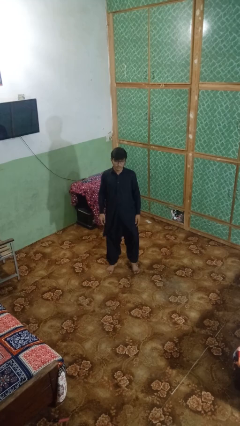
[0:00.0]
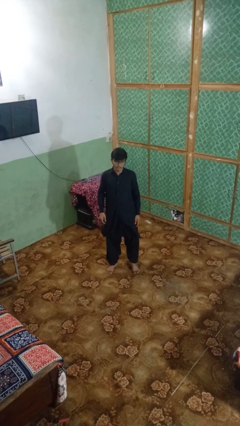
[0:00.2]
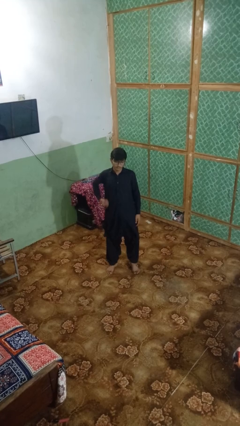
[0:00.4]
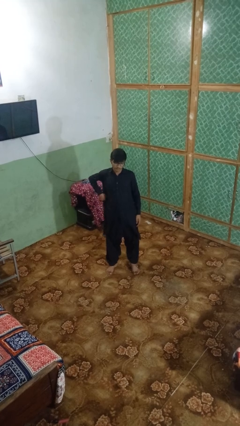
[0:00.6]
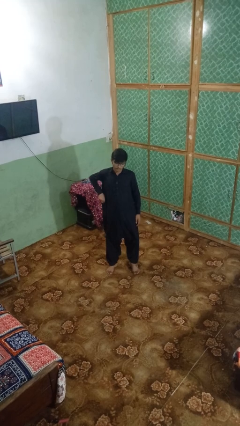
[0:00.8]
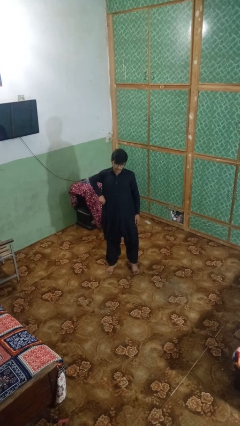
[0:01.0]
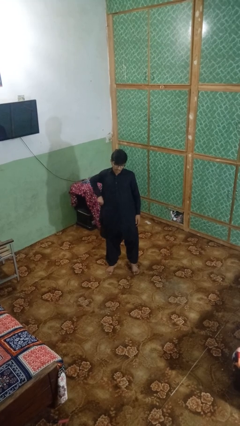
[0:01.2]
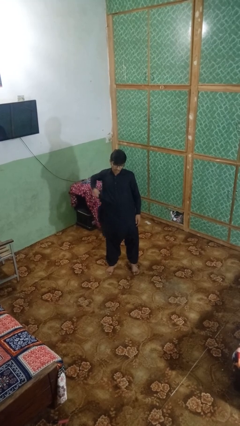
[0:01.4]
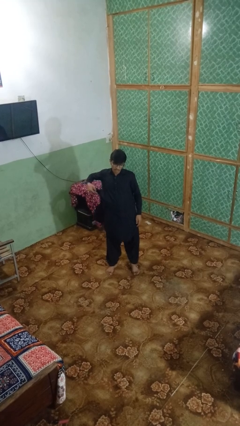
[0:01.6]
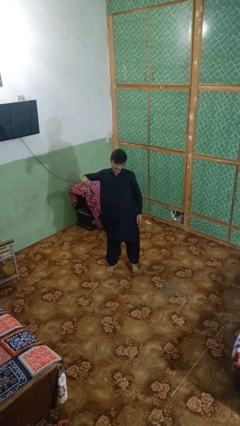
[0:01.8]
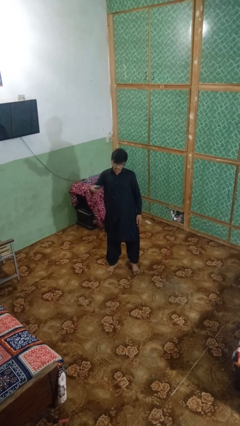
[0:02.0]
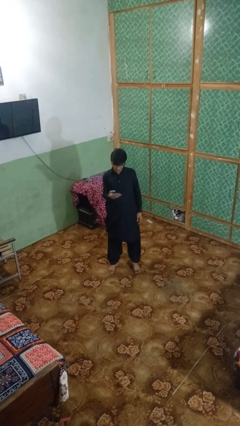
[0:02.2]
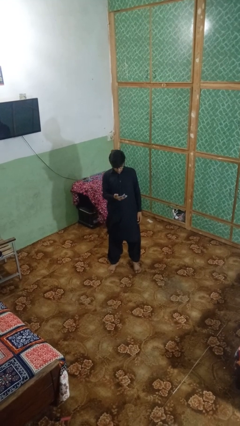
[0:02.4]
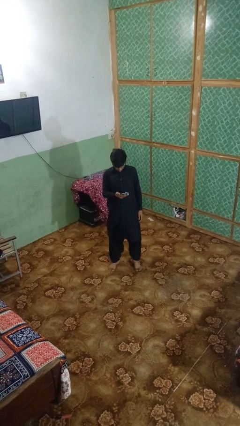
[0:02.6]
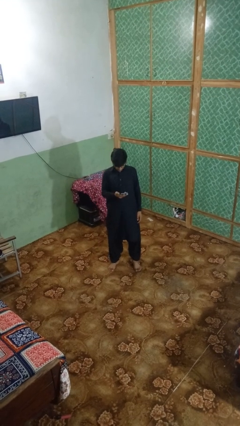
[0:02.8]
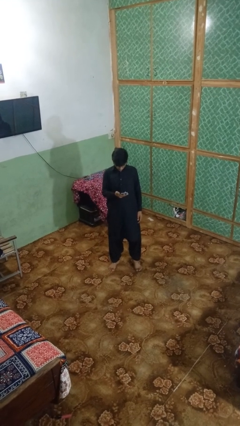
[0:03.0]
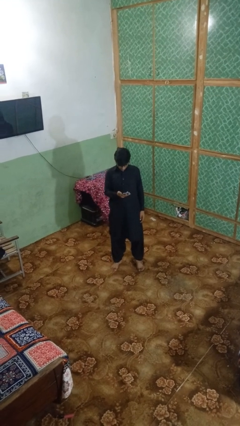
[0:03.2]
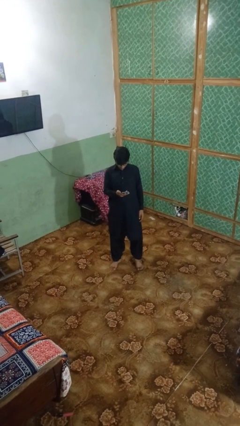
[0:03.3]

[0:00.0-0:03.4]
person takes phone from pocket

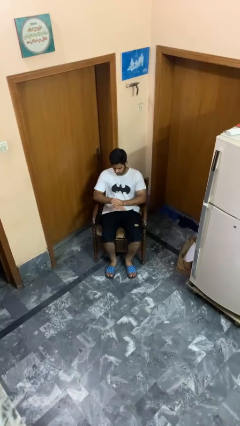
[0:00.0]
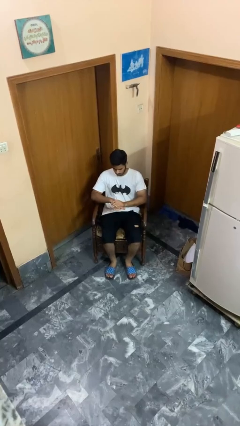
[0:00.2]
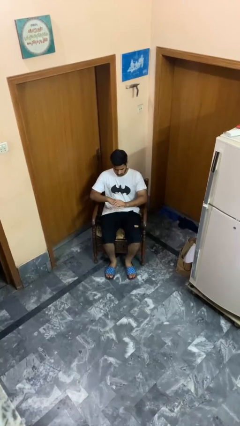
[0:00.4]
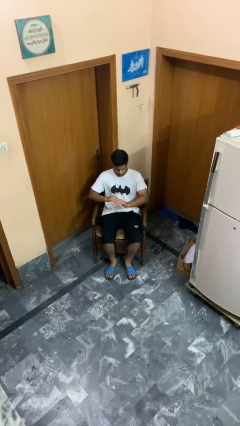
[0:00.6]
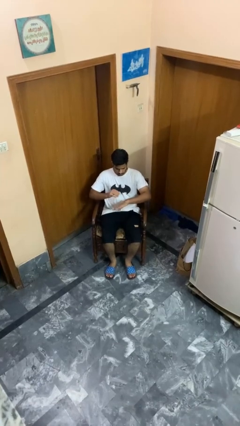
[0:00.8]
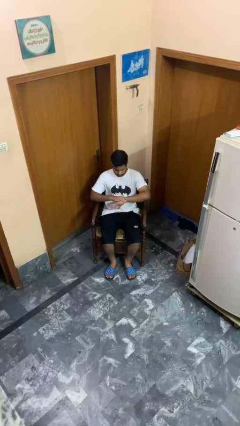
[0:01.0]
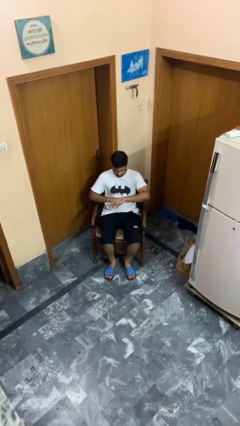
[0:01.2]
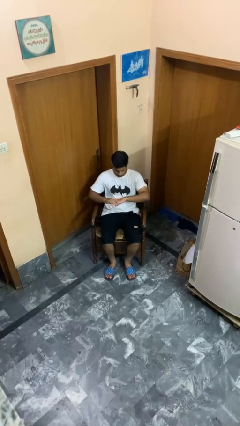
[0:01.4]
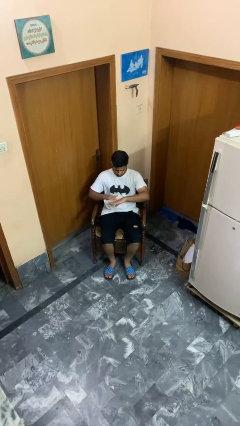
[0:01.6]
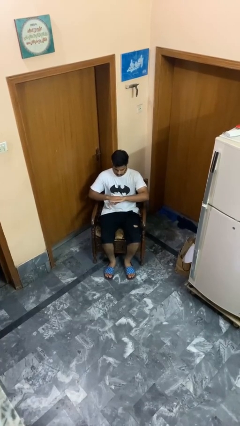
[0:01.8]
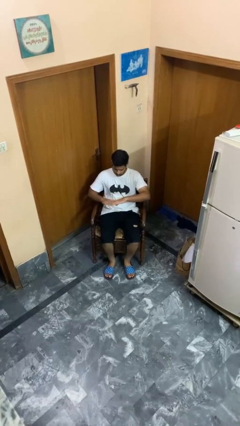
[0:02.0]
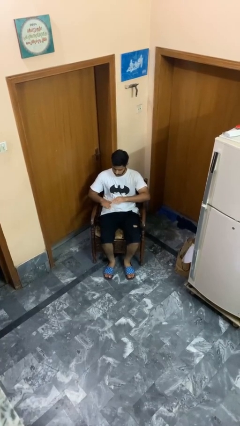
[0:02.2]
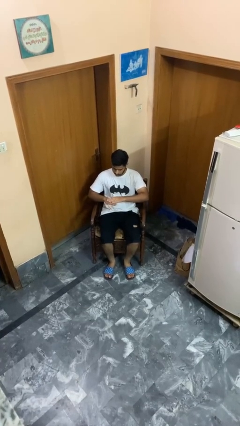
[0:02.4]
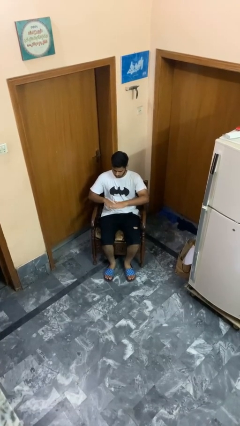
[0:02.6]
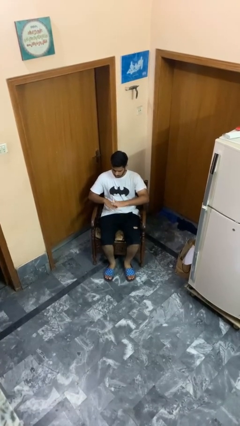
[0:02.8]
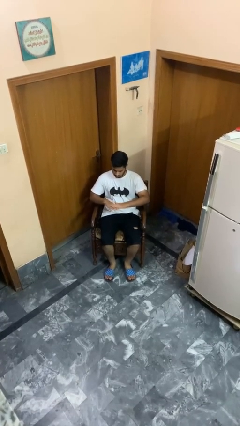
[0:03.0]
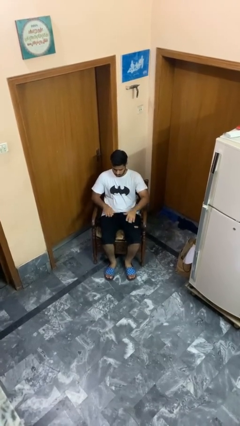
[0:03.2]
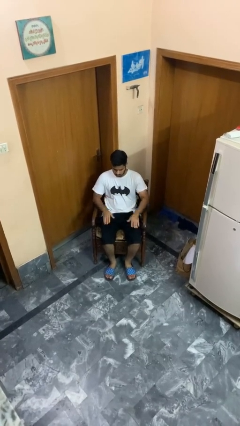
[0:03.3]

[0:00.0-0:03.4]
person looks at hands in lap

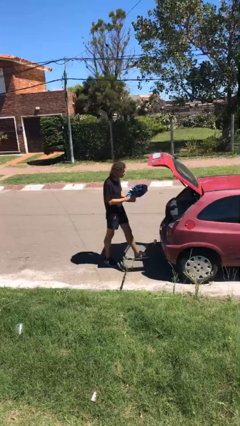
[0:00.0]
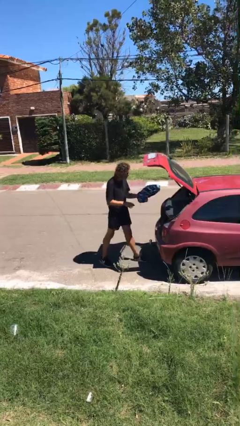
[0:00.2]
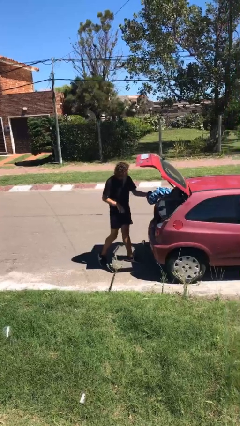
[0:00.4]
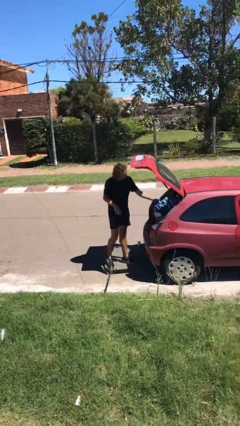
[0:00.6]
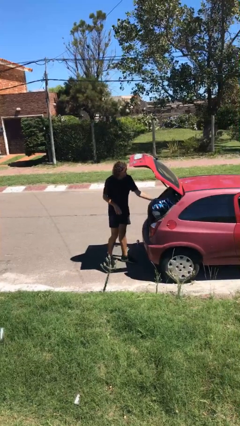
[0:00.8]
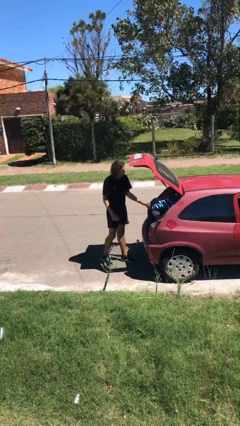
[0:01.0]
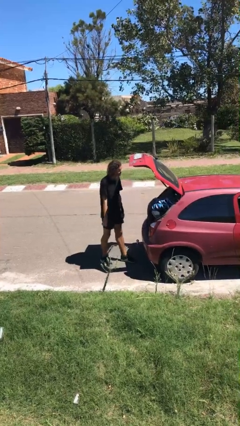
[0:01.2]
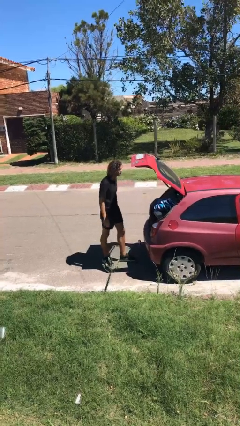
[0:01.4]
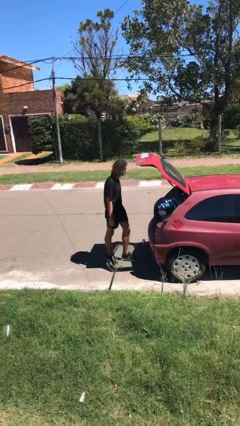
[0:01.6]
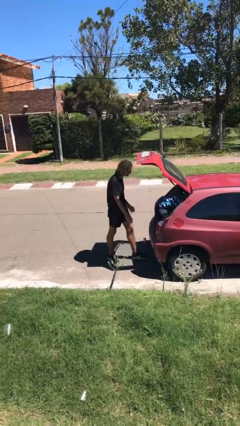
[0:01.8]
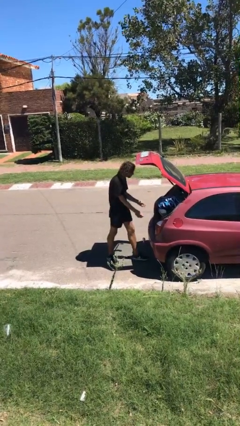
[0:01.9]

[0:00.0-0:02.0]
person loads car

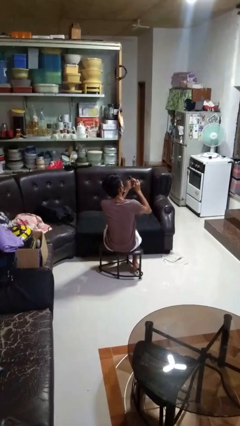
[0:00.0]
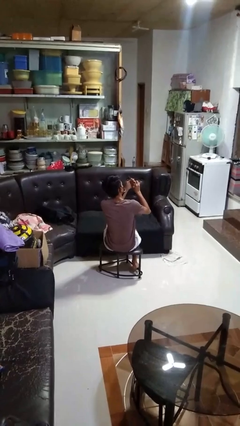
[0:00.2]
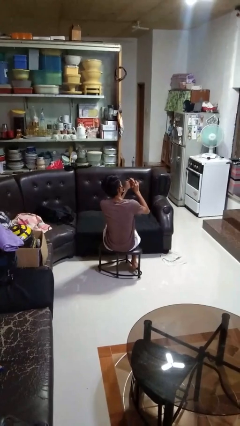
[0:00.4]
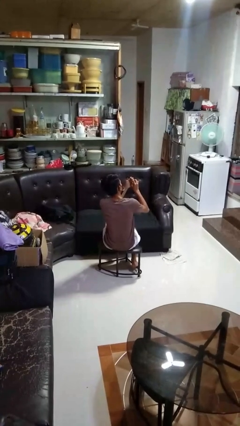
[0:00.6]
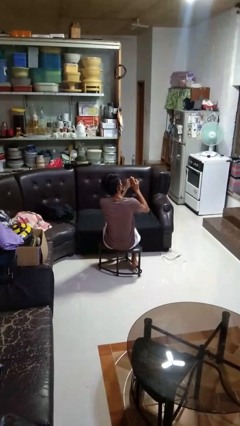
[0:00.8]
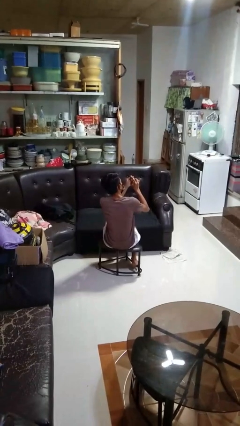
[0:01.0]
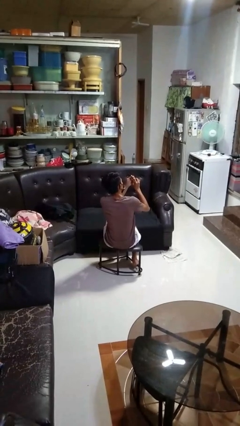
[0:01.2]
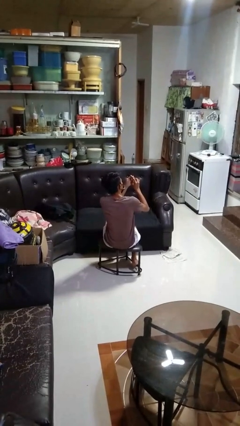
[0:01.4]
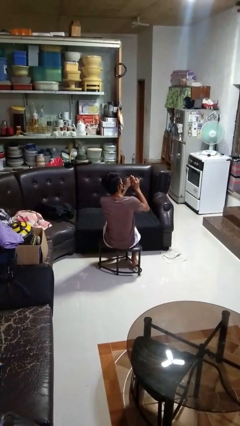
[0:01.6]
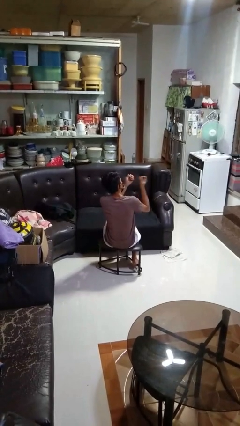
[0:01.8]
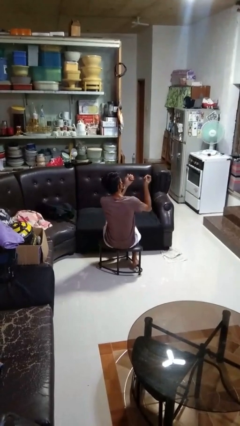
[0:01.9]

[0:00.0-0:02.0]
person files fingernails

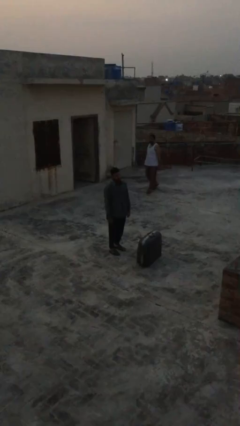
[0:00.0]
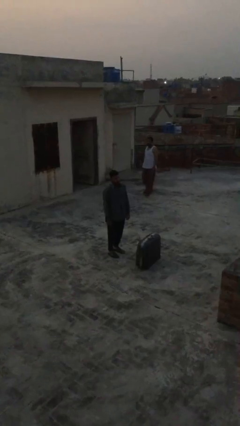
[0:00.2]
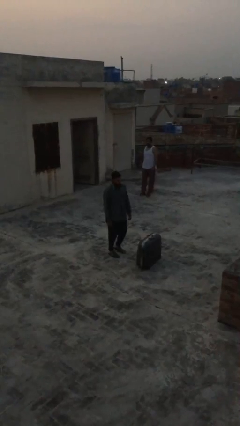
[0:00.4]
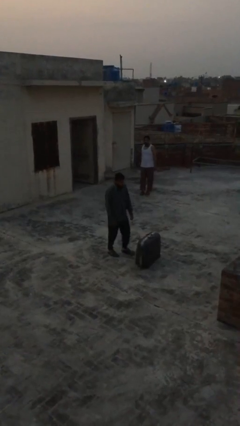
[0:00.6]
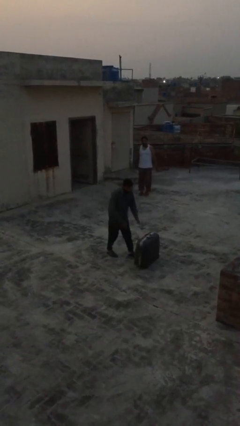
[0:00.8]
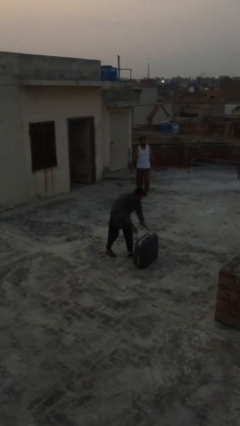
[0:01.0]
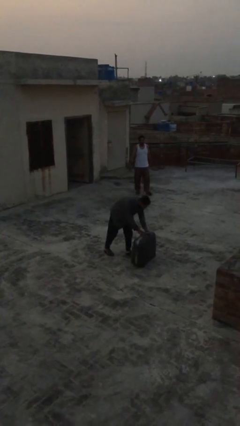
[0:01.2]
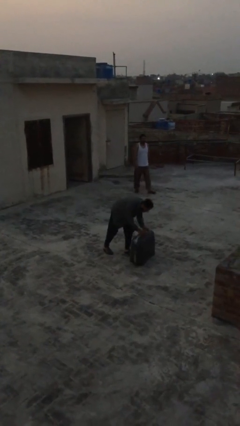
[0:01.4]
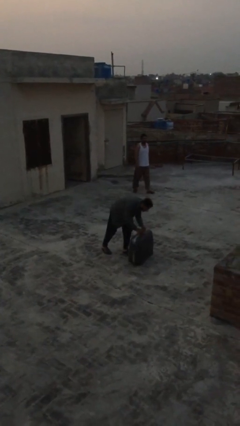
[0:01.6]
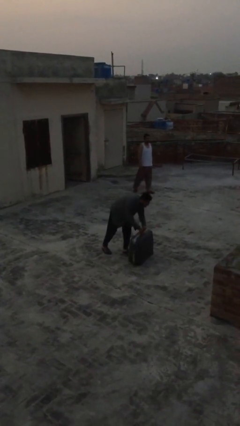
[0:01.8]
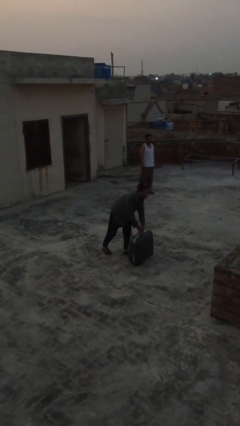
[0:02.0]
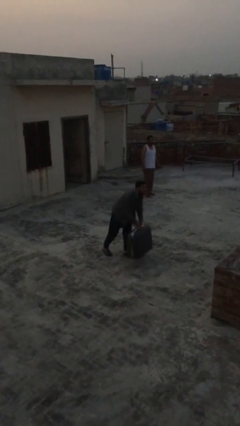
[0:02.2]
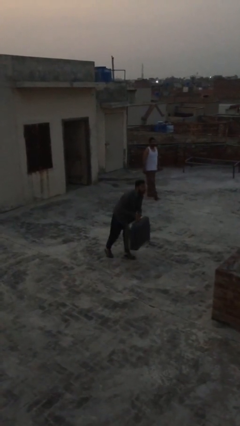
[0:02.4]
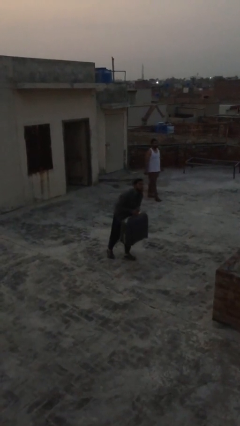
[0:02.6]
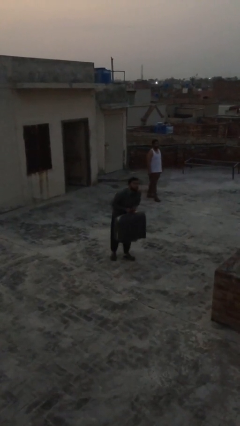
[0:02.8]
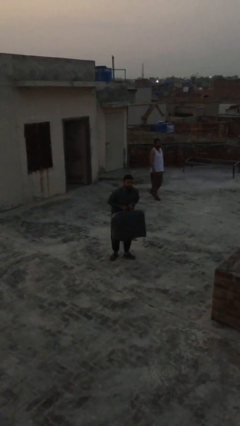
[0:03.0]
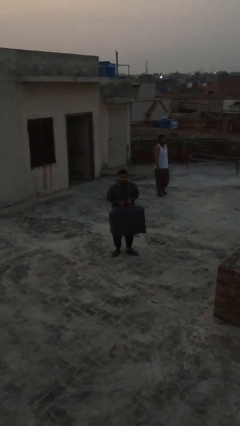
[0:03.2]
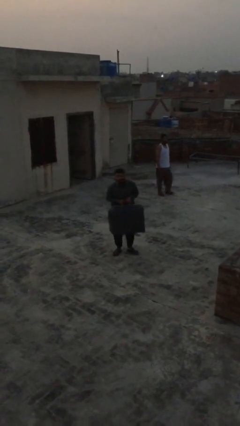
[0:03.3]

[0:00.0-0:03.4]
person picks up object from floor

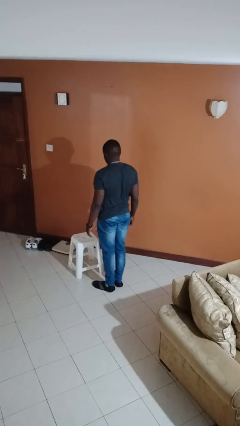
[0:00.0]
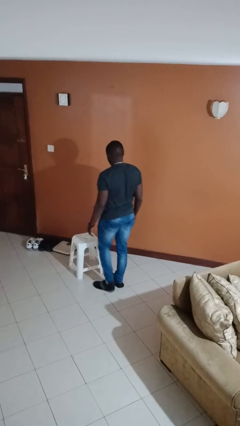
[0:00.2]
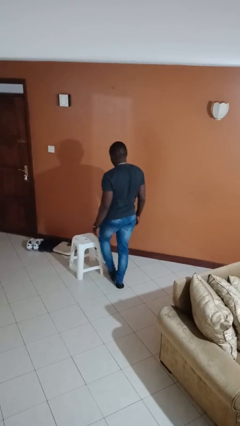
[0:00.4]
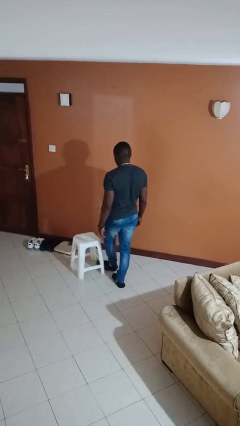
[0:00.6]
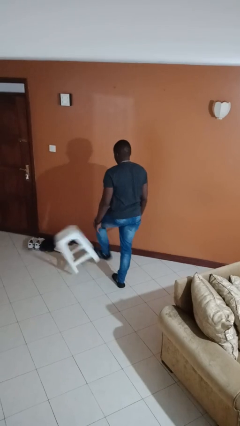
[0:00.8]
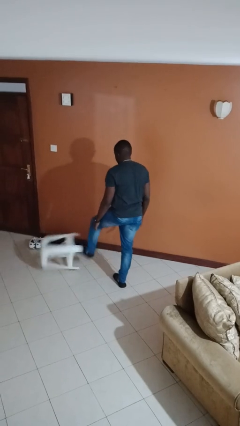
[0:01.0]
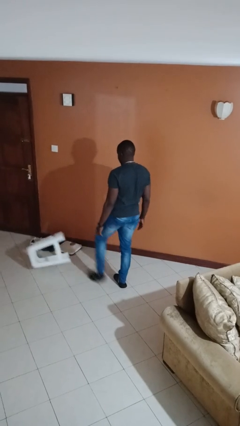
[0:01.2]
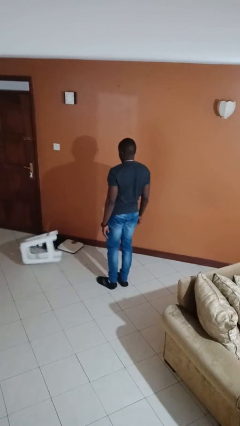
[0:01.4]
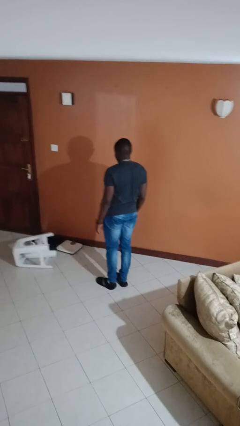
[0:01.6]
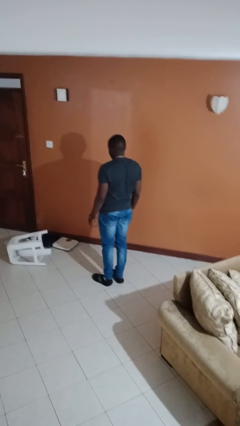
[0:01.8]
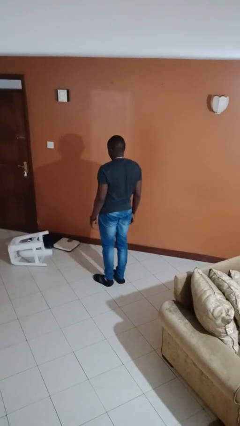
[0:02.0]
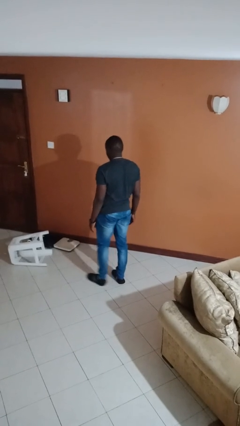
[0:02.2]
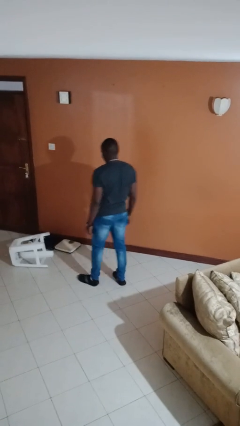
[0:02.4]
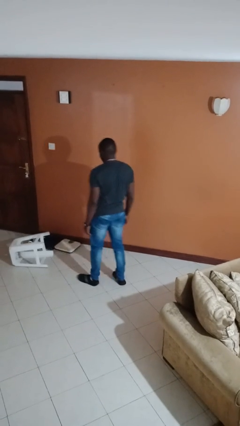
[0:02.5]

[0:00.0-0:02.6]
person knocks over furniture

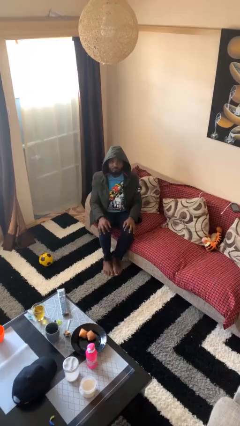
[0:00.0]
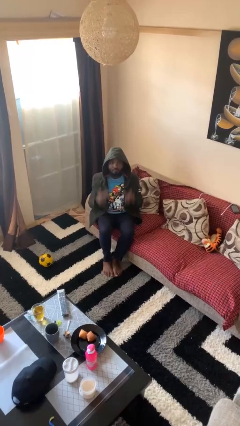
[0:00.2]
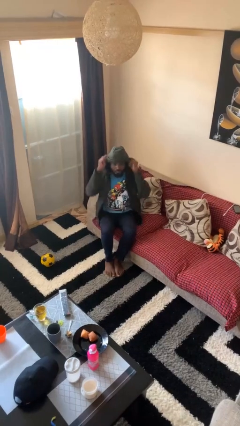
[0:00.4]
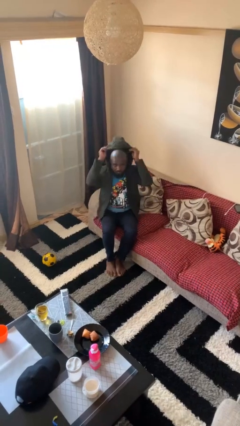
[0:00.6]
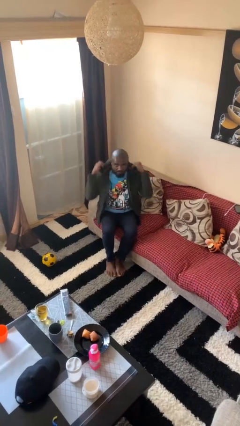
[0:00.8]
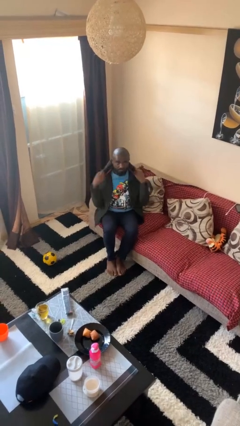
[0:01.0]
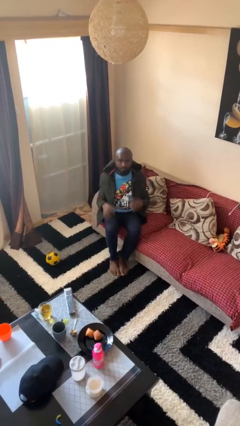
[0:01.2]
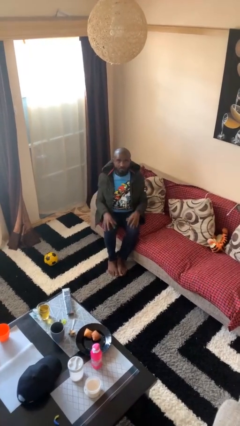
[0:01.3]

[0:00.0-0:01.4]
person takes off hoodie
